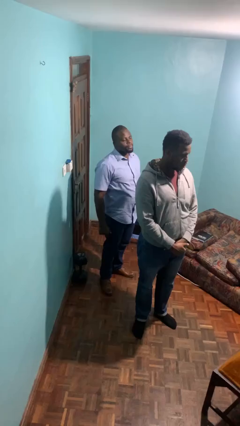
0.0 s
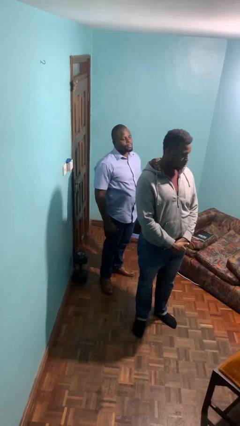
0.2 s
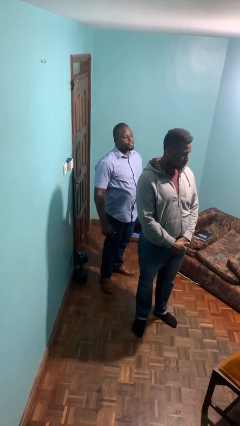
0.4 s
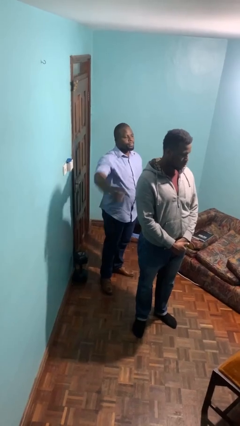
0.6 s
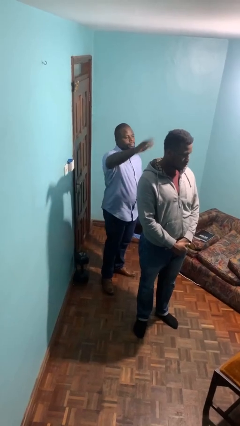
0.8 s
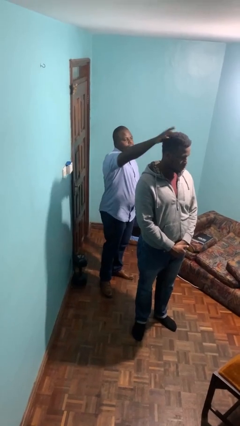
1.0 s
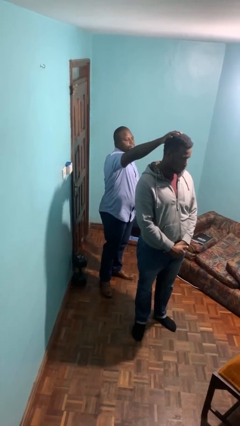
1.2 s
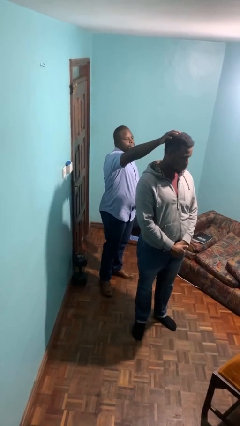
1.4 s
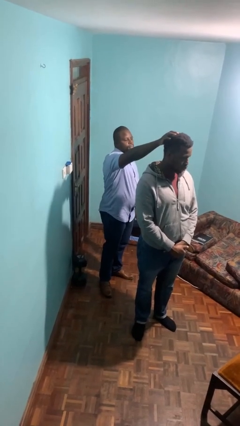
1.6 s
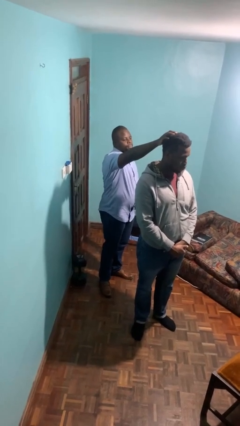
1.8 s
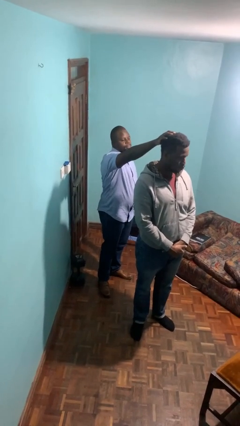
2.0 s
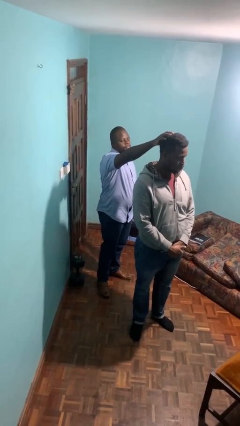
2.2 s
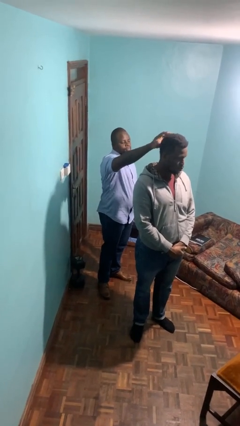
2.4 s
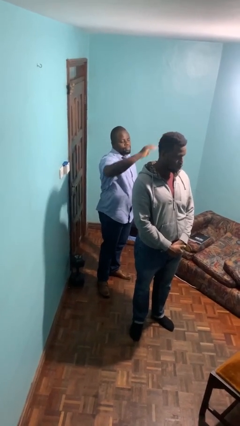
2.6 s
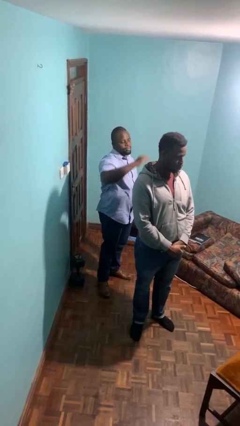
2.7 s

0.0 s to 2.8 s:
person grabs person by hair

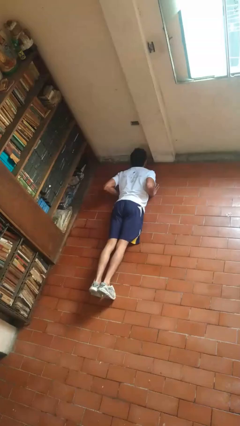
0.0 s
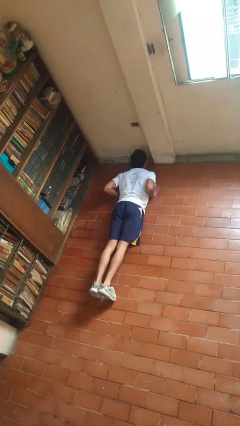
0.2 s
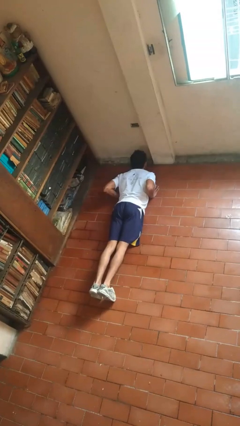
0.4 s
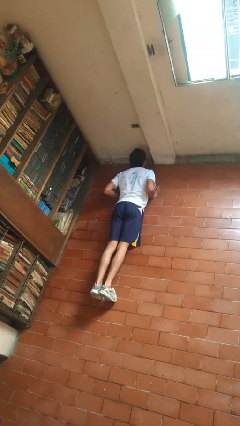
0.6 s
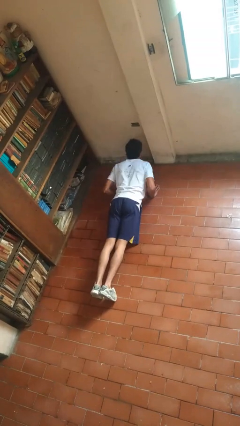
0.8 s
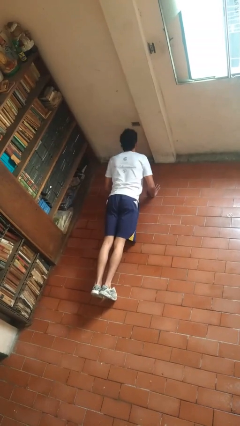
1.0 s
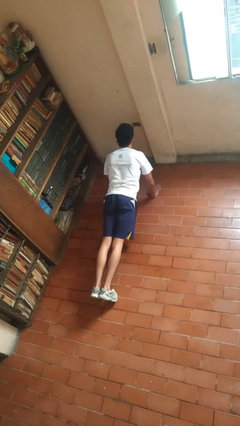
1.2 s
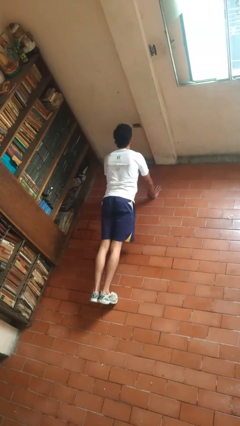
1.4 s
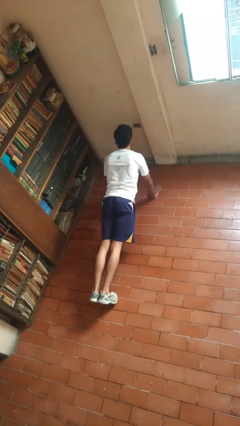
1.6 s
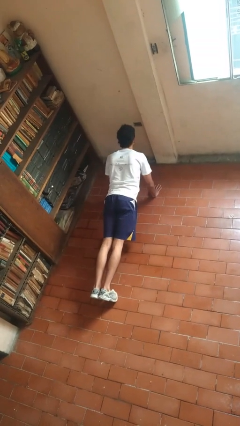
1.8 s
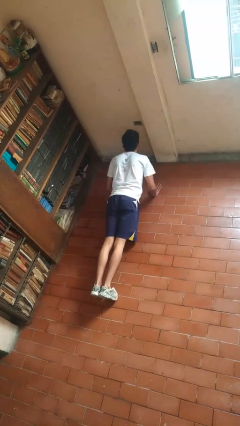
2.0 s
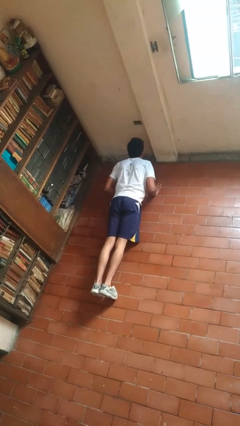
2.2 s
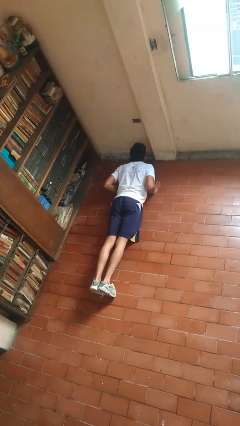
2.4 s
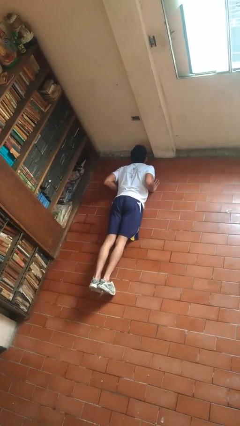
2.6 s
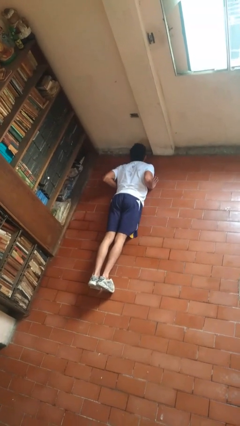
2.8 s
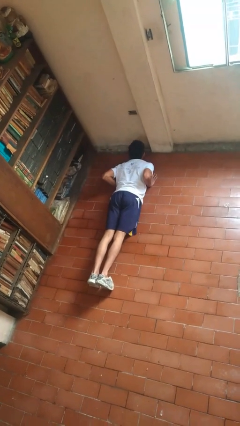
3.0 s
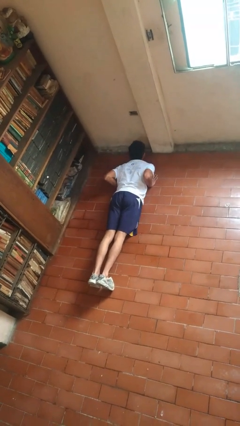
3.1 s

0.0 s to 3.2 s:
person exercises with pushup

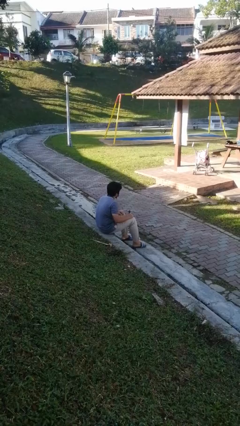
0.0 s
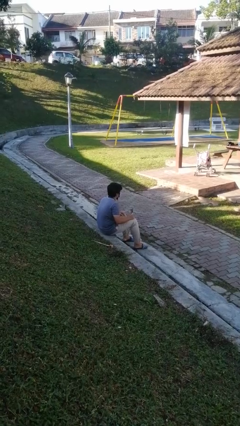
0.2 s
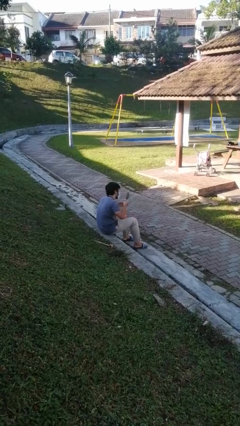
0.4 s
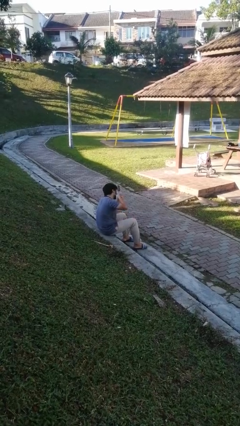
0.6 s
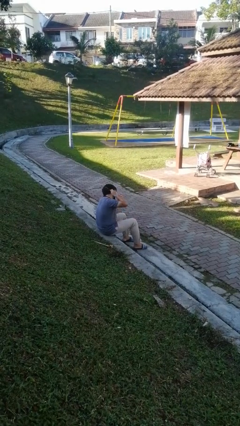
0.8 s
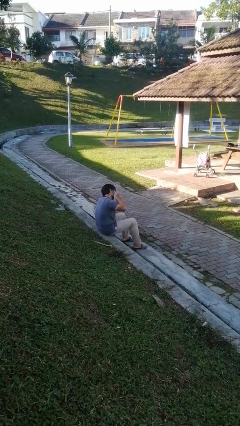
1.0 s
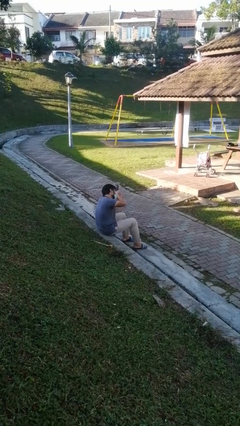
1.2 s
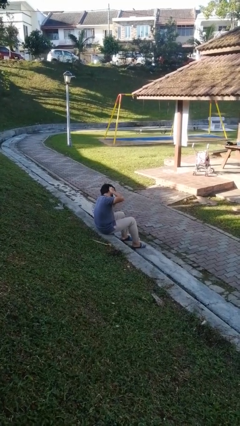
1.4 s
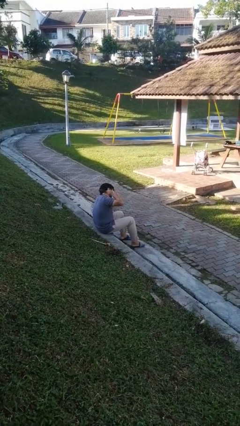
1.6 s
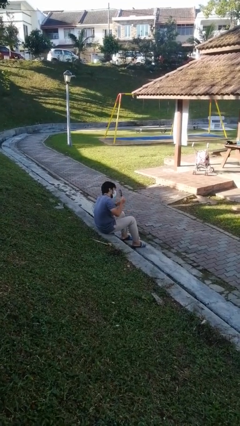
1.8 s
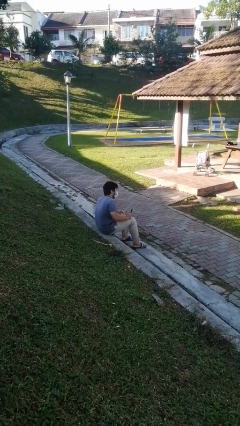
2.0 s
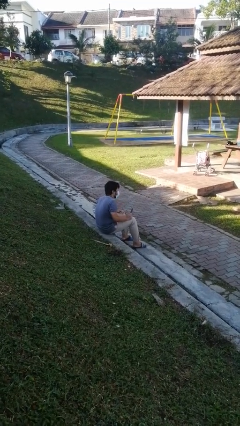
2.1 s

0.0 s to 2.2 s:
person brushes hair

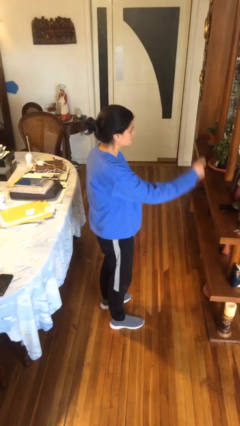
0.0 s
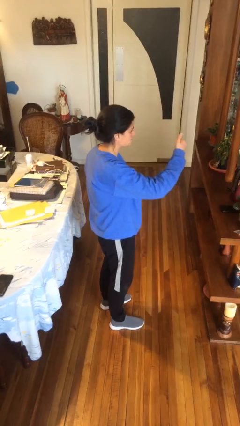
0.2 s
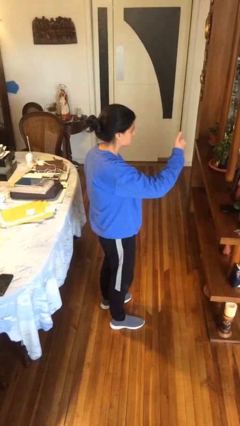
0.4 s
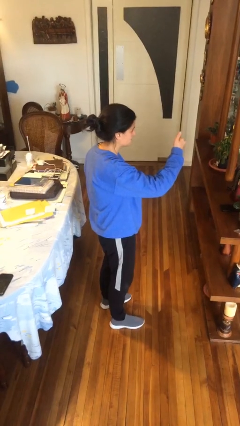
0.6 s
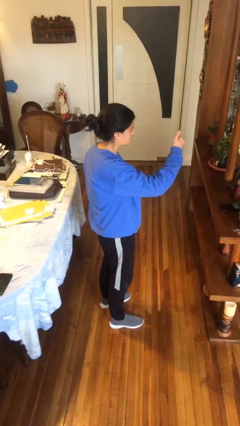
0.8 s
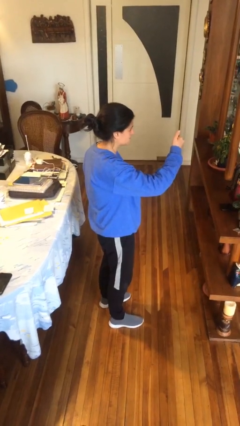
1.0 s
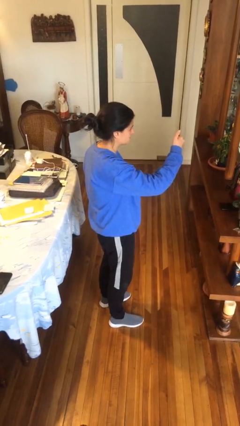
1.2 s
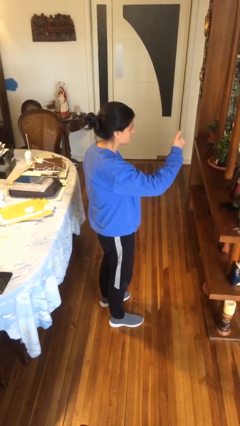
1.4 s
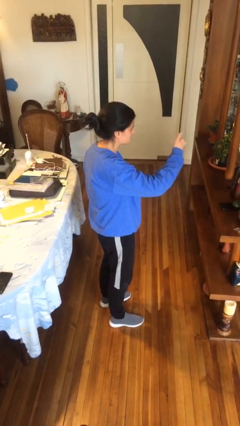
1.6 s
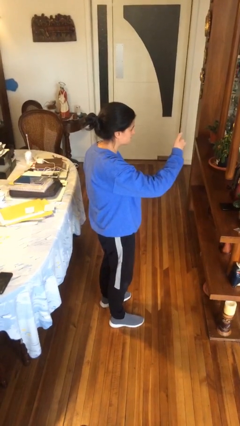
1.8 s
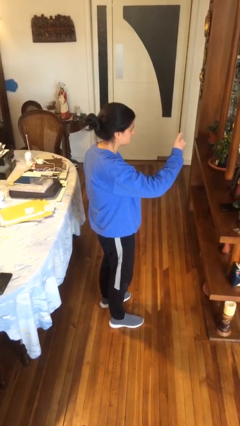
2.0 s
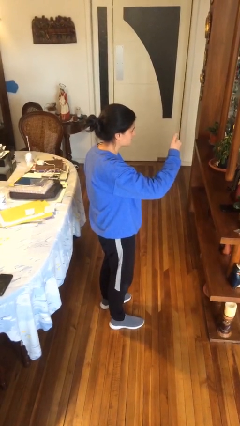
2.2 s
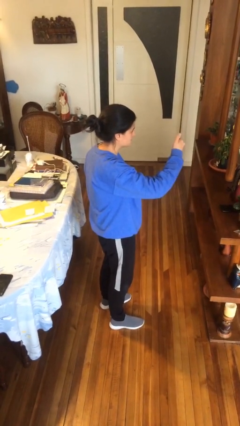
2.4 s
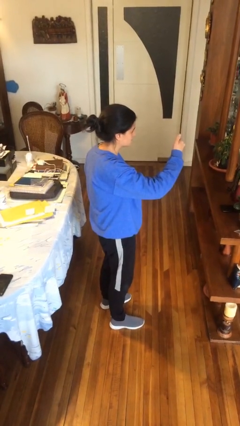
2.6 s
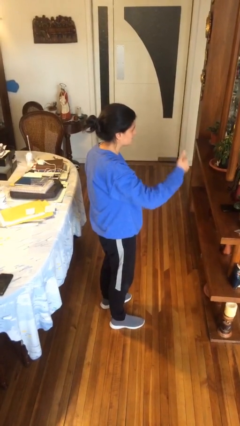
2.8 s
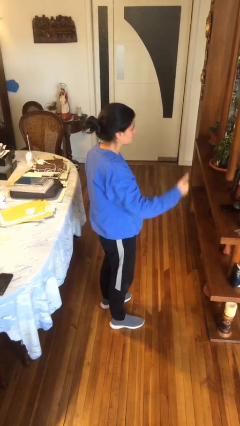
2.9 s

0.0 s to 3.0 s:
person gestures thumbs up

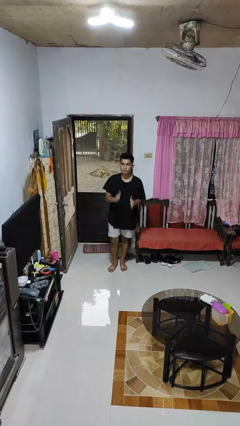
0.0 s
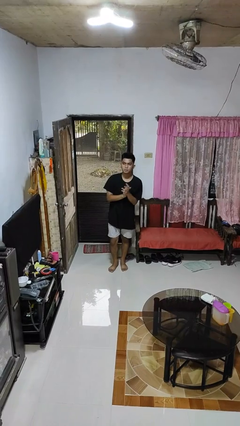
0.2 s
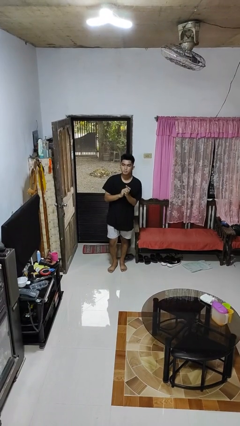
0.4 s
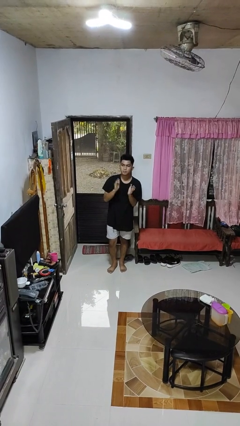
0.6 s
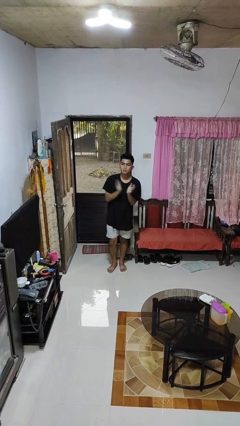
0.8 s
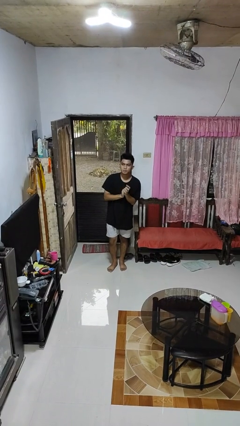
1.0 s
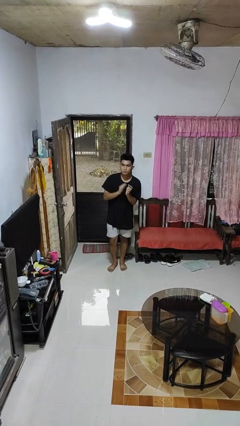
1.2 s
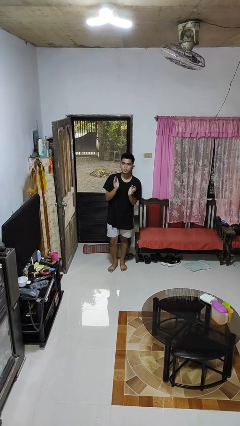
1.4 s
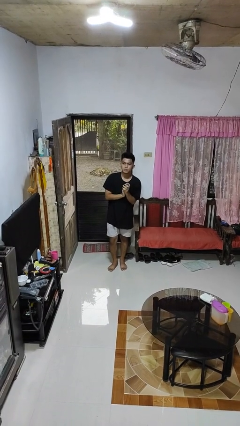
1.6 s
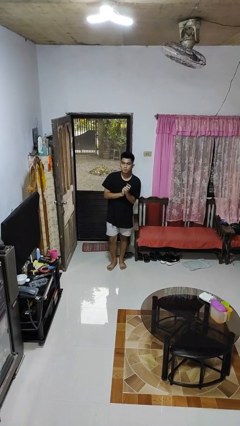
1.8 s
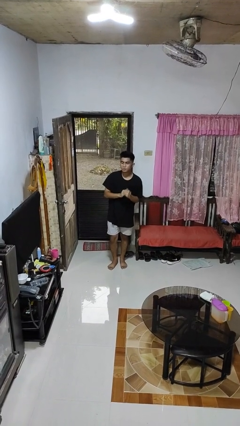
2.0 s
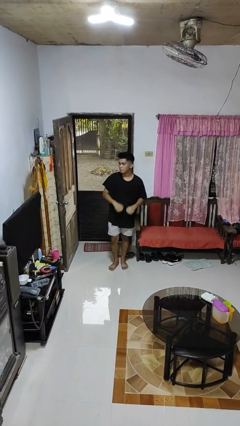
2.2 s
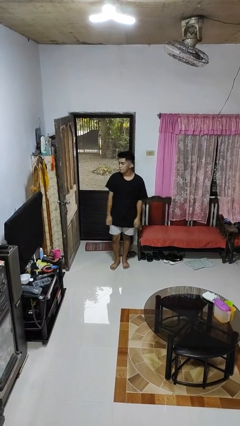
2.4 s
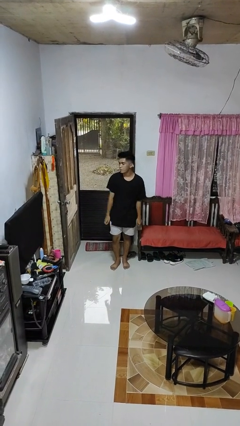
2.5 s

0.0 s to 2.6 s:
person claps hands

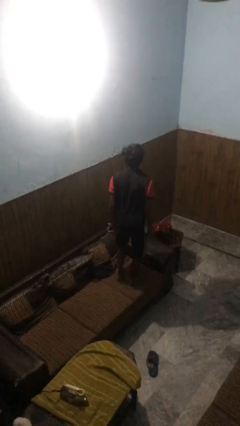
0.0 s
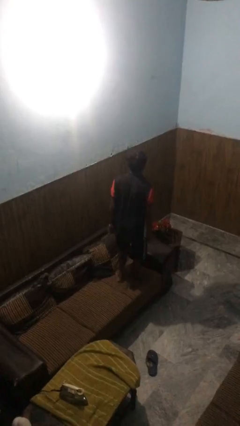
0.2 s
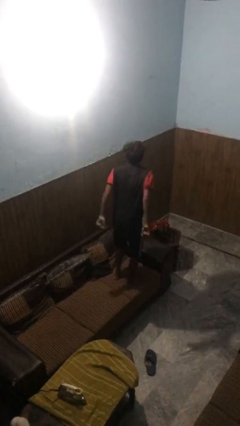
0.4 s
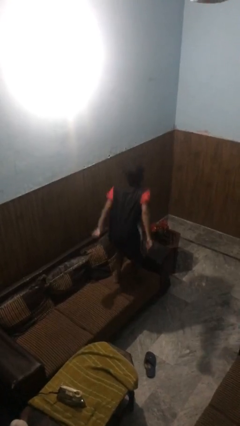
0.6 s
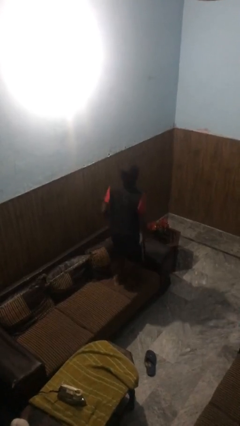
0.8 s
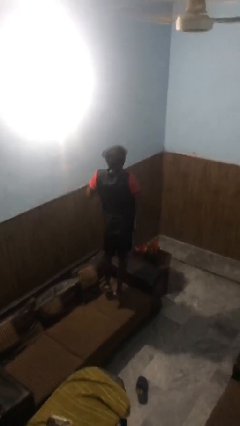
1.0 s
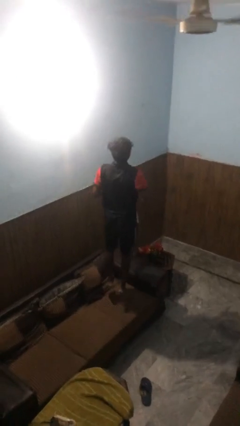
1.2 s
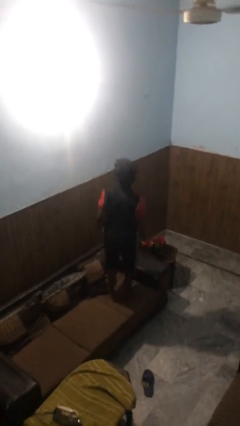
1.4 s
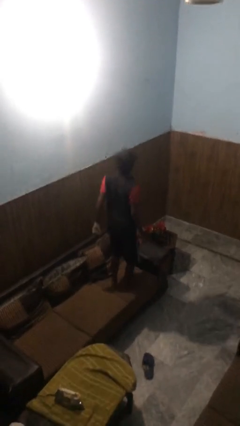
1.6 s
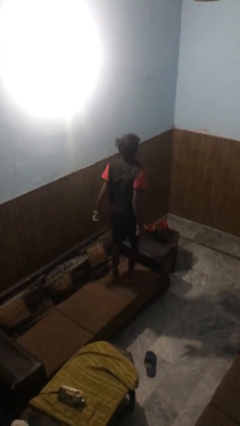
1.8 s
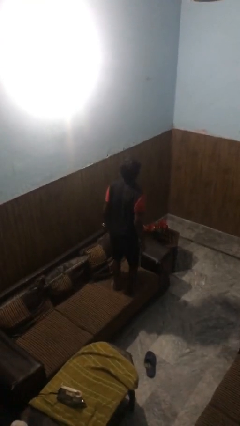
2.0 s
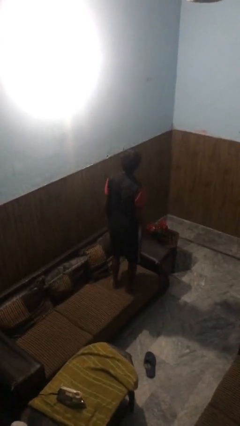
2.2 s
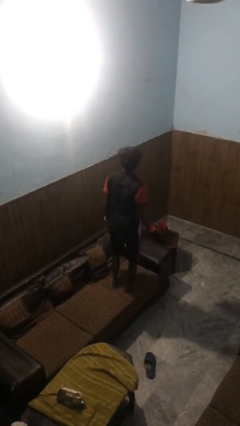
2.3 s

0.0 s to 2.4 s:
person jumps on couch

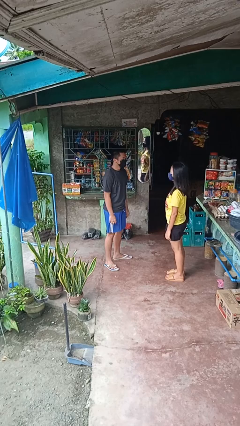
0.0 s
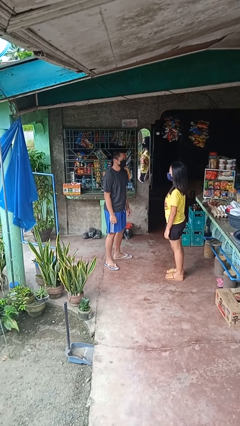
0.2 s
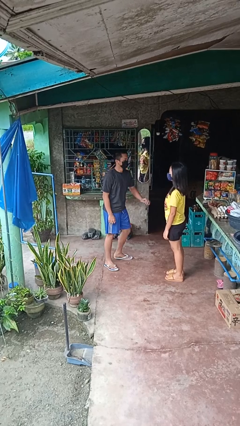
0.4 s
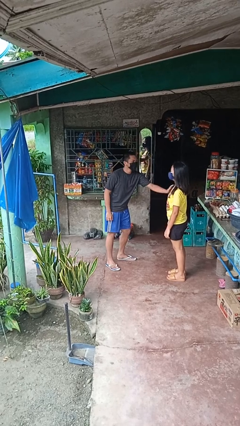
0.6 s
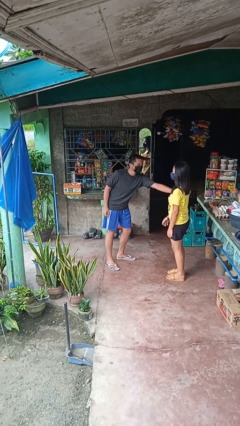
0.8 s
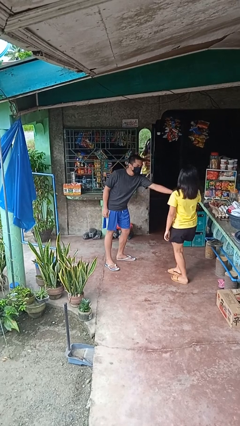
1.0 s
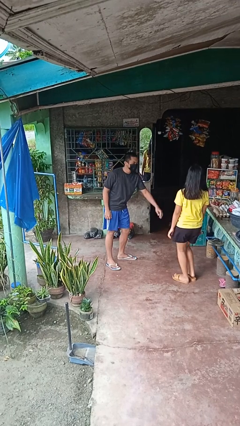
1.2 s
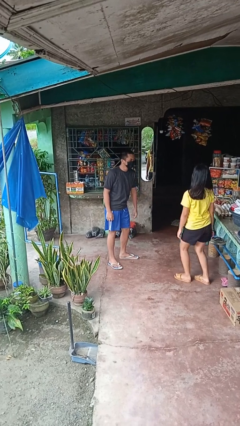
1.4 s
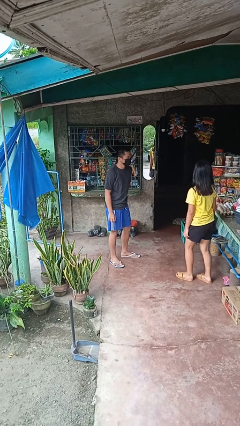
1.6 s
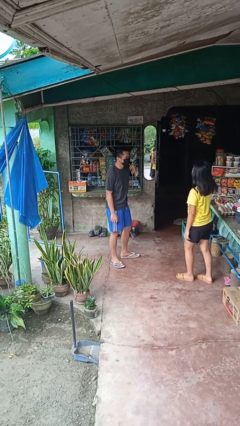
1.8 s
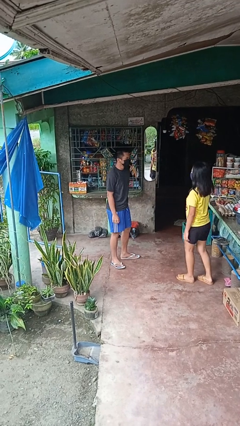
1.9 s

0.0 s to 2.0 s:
person shoves person
